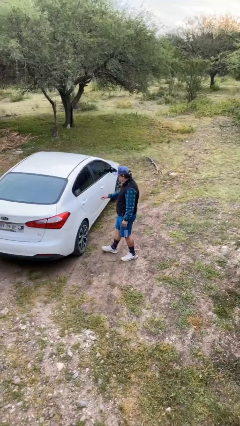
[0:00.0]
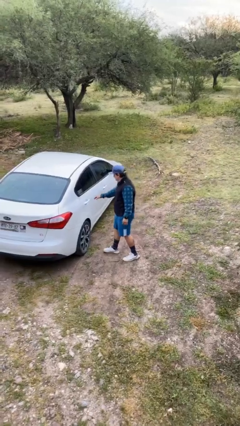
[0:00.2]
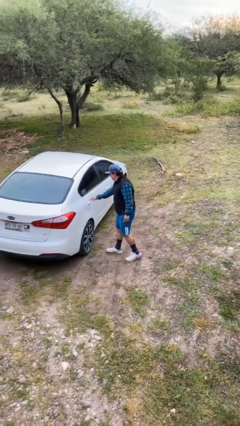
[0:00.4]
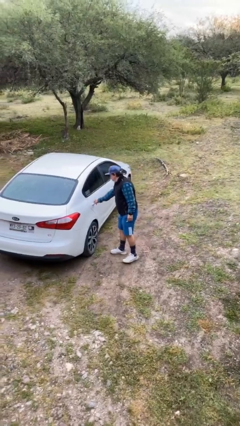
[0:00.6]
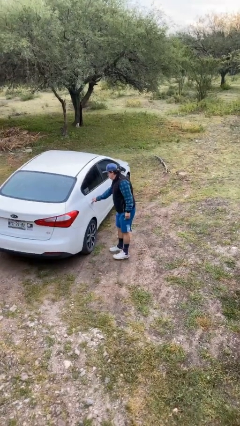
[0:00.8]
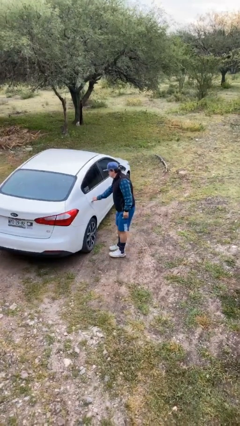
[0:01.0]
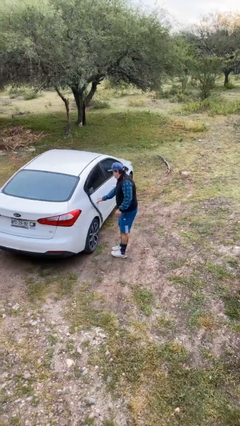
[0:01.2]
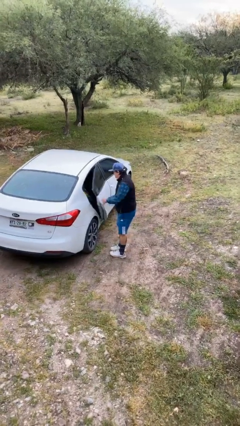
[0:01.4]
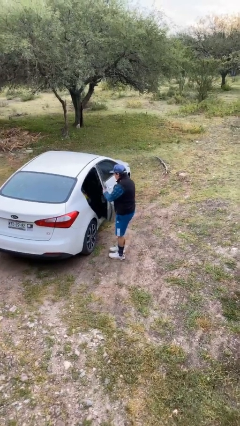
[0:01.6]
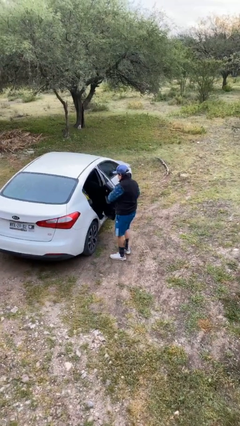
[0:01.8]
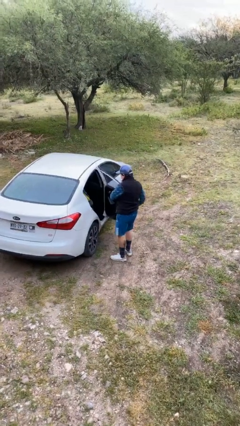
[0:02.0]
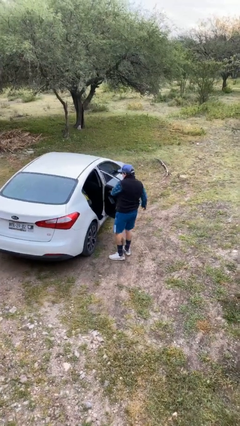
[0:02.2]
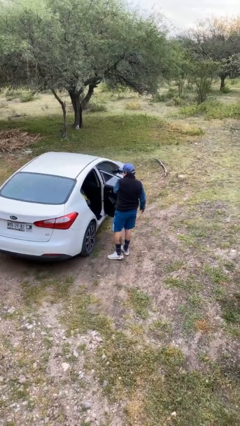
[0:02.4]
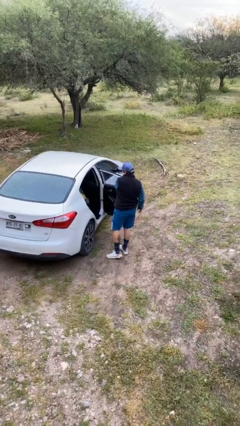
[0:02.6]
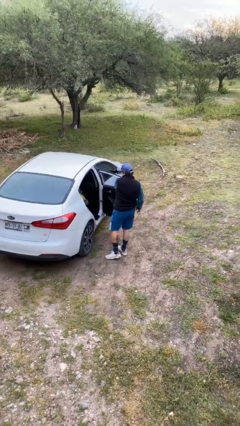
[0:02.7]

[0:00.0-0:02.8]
person opens car door

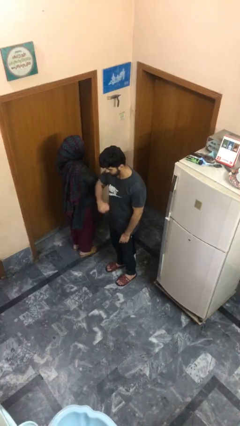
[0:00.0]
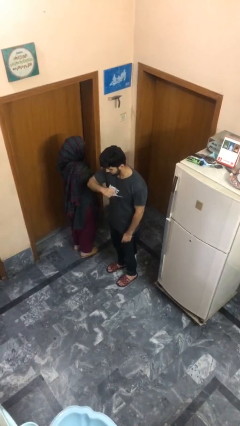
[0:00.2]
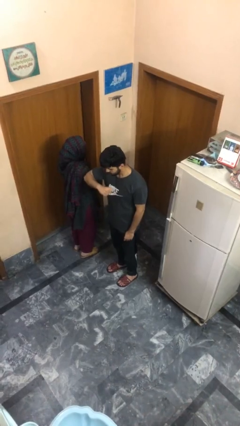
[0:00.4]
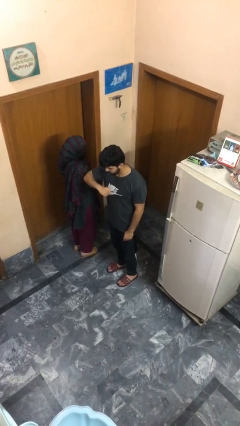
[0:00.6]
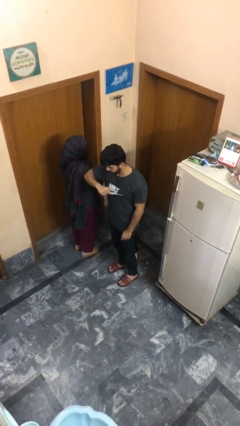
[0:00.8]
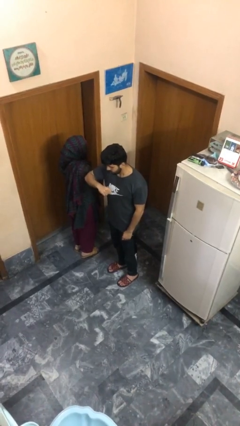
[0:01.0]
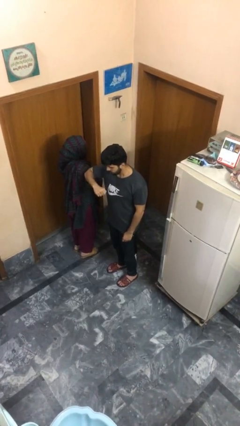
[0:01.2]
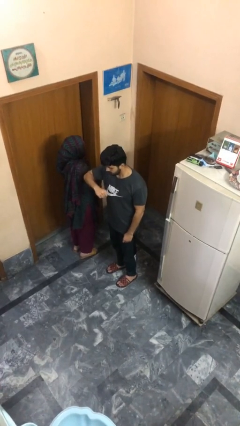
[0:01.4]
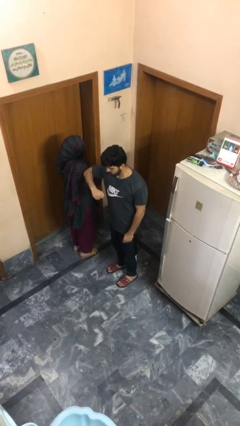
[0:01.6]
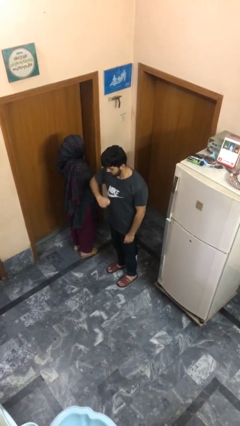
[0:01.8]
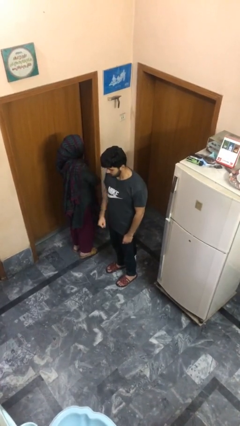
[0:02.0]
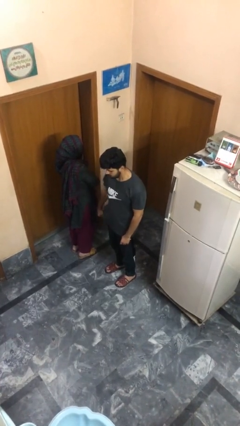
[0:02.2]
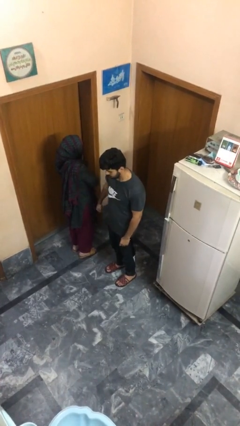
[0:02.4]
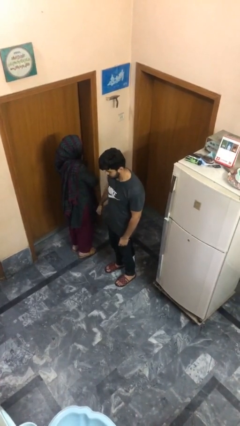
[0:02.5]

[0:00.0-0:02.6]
person nudges person with elbow

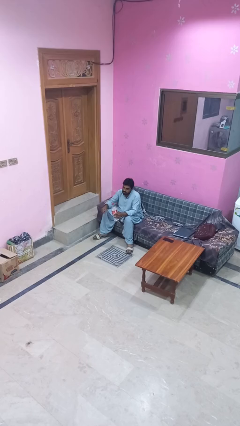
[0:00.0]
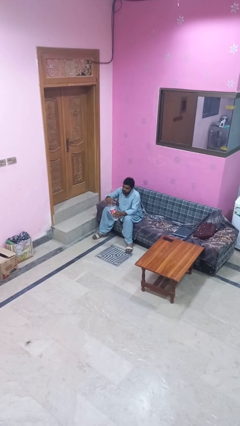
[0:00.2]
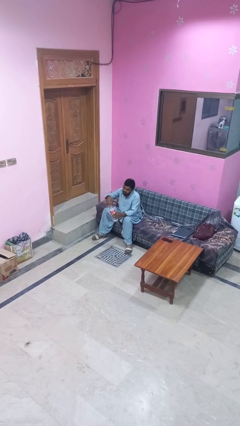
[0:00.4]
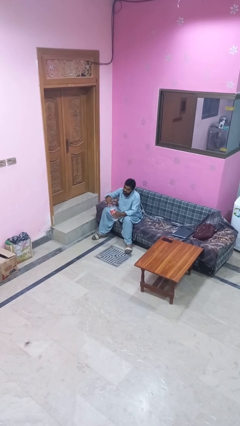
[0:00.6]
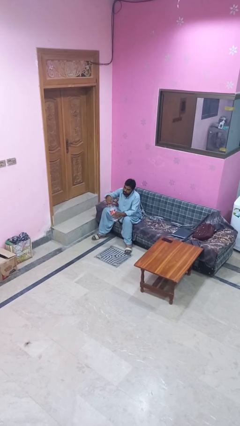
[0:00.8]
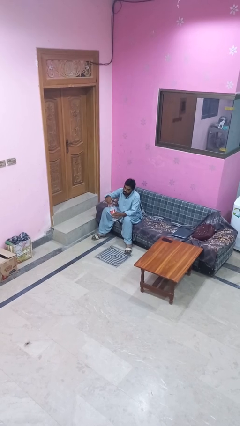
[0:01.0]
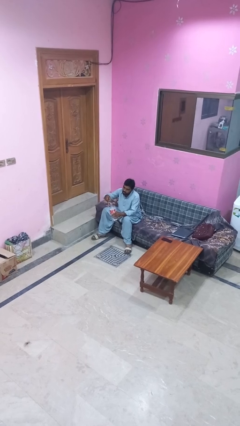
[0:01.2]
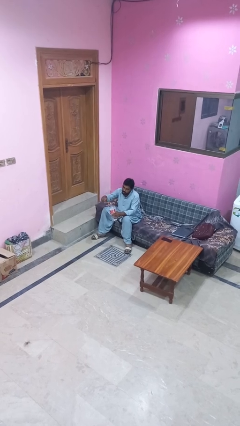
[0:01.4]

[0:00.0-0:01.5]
person unscrews lid from bottle

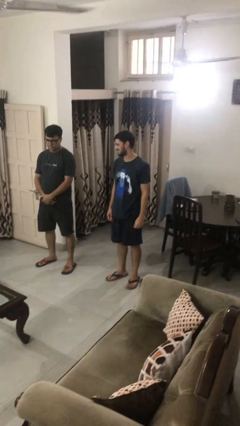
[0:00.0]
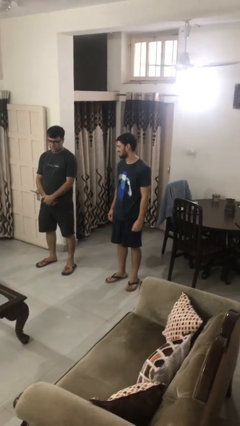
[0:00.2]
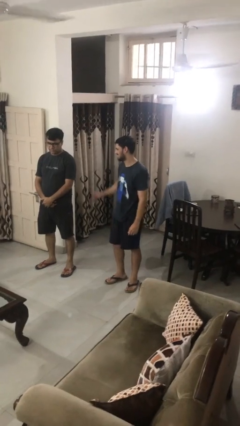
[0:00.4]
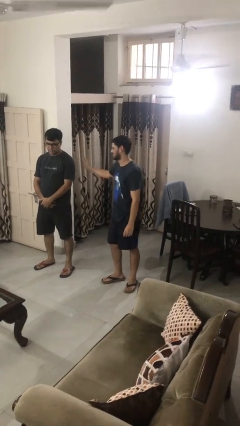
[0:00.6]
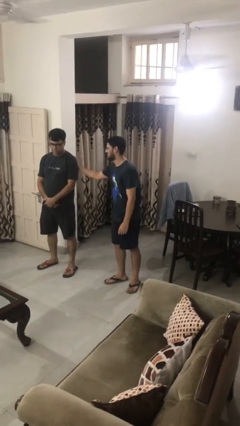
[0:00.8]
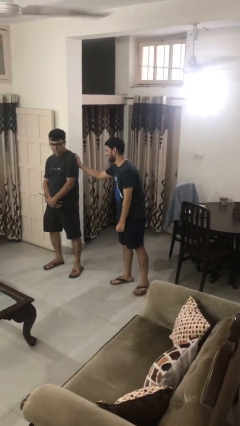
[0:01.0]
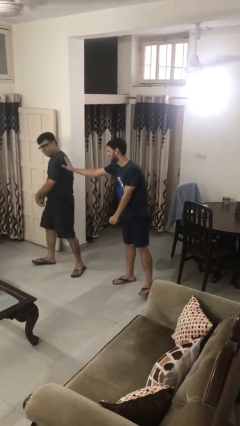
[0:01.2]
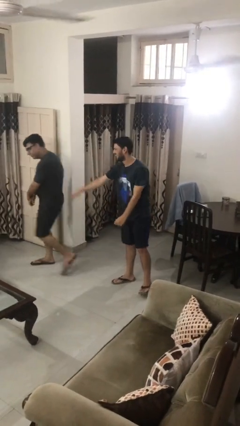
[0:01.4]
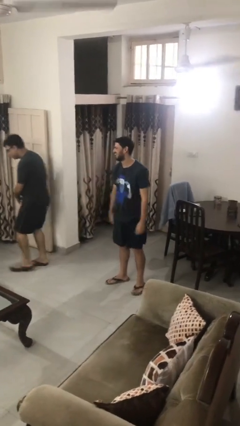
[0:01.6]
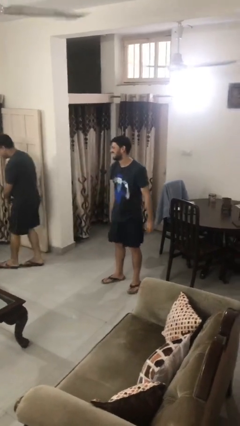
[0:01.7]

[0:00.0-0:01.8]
person shoves person

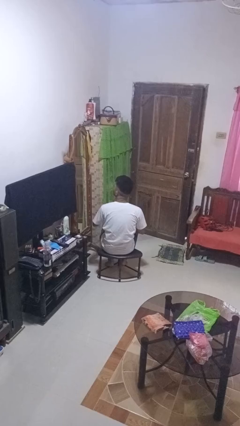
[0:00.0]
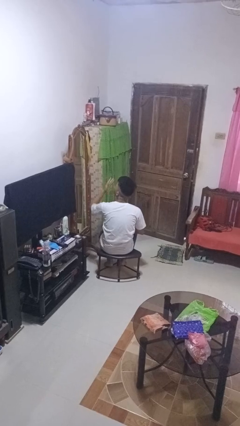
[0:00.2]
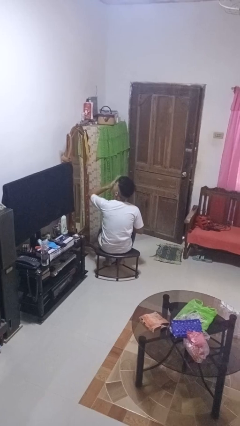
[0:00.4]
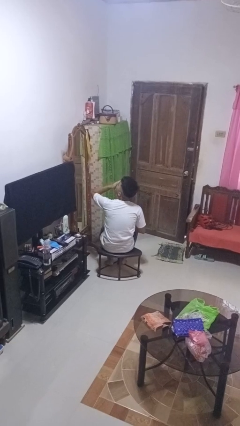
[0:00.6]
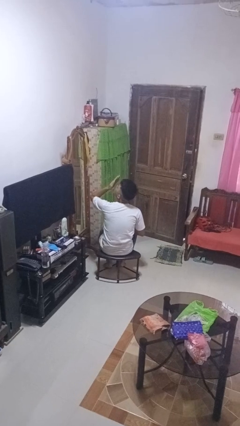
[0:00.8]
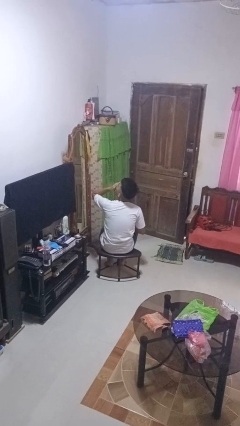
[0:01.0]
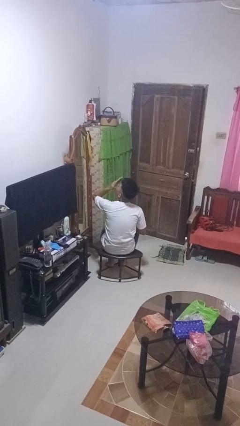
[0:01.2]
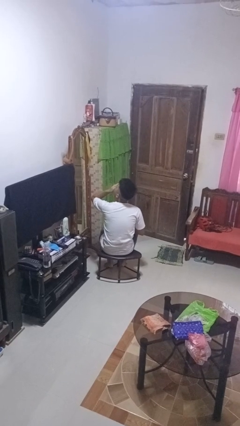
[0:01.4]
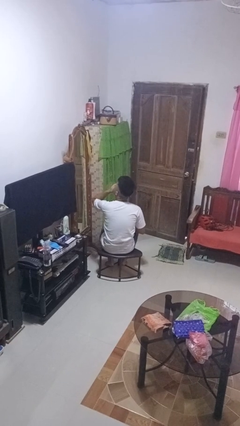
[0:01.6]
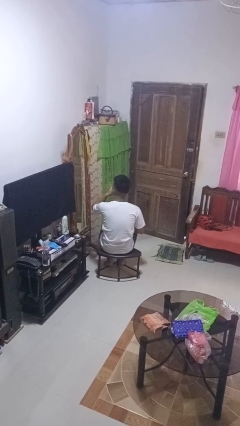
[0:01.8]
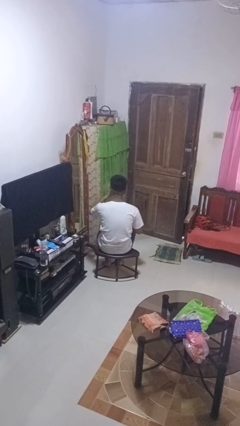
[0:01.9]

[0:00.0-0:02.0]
person yawns

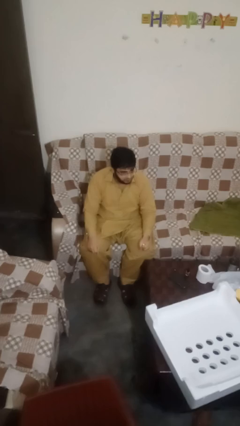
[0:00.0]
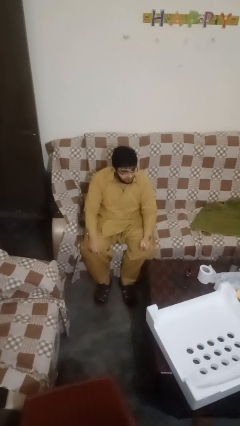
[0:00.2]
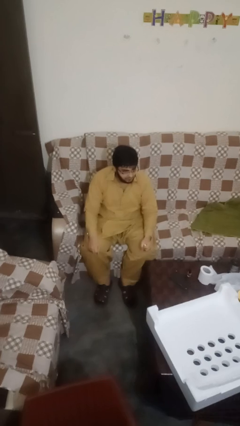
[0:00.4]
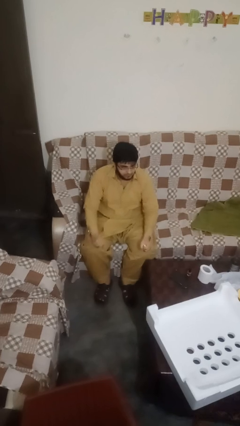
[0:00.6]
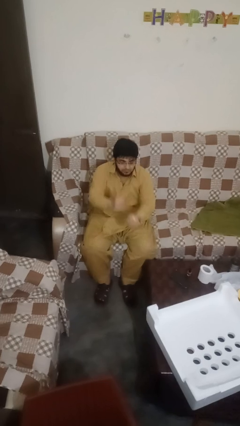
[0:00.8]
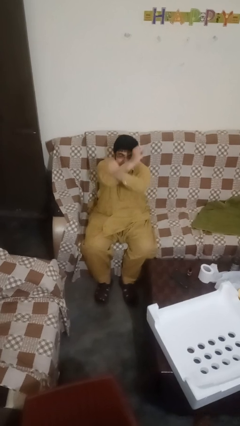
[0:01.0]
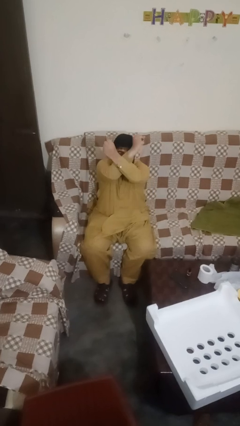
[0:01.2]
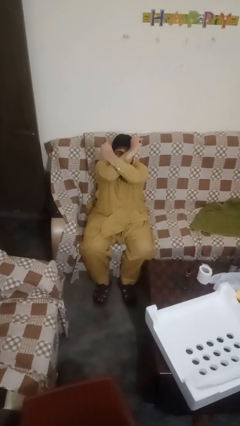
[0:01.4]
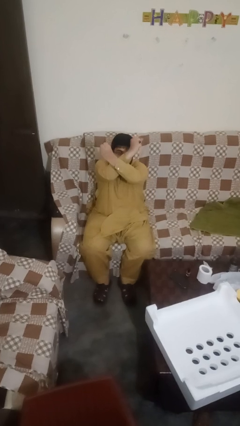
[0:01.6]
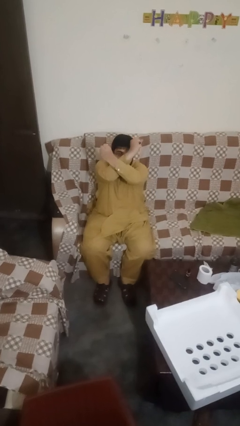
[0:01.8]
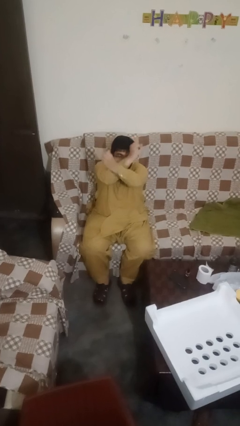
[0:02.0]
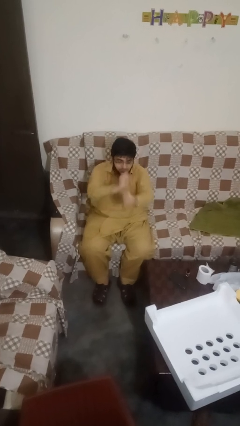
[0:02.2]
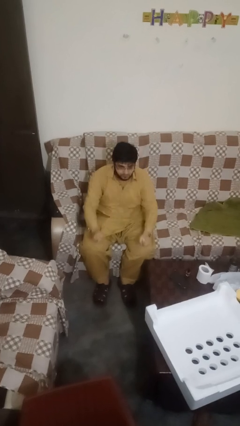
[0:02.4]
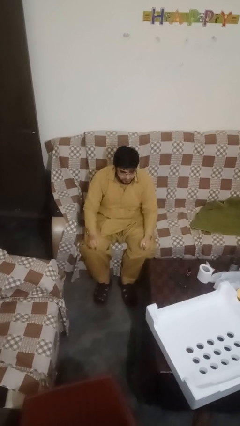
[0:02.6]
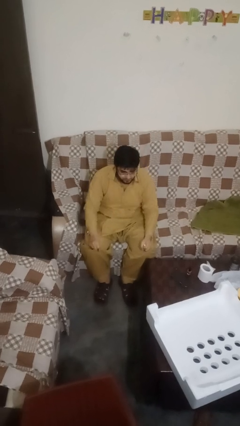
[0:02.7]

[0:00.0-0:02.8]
person gestures arms x

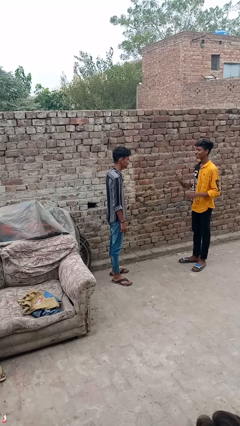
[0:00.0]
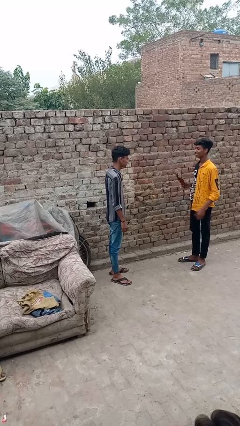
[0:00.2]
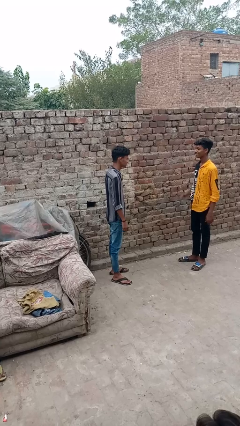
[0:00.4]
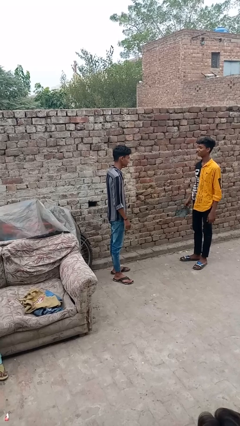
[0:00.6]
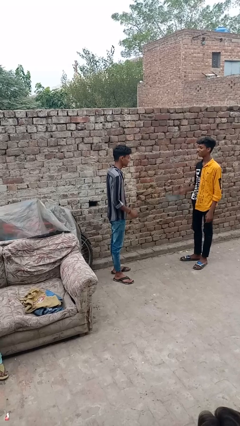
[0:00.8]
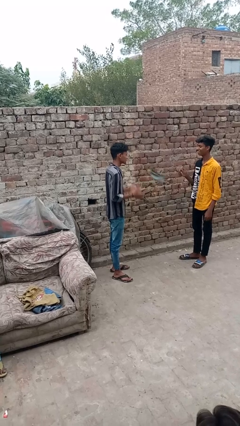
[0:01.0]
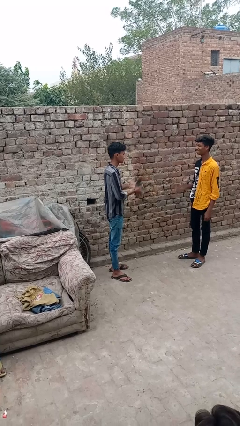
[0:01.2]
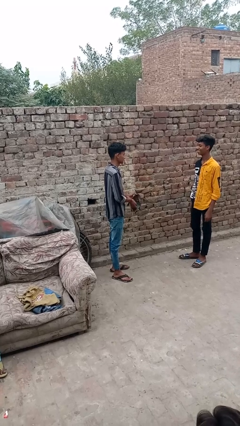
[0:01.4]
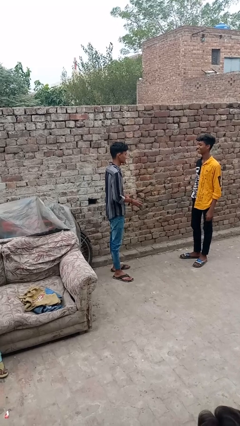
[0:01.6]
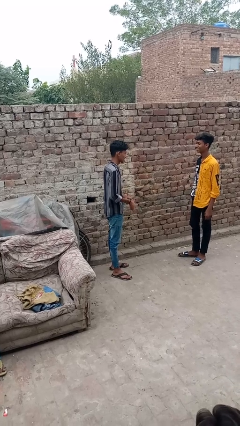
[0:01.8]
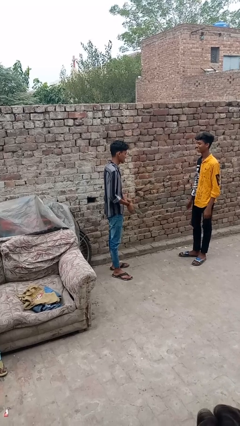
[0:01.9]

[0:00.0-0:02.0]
person catches object from person

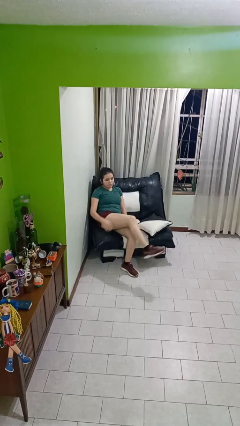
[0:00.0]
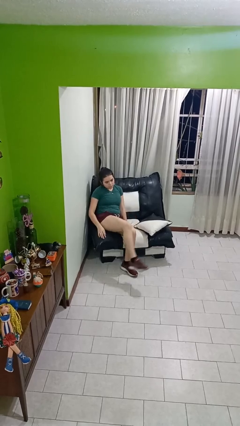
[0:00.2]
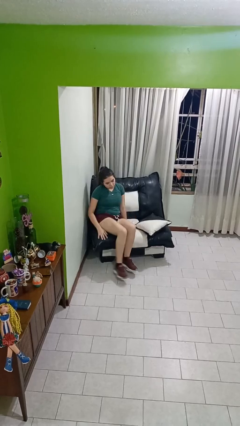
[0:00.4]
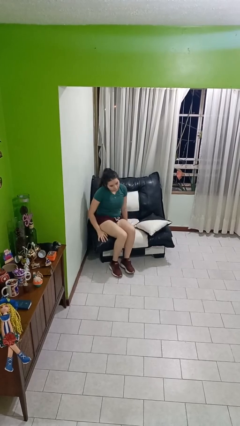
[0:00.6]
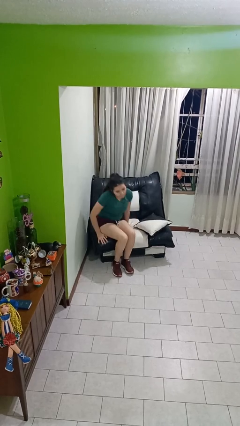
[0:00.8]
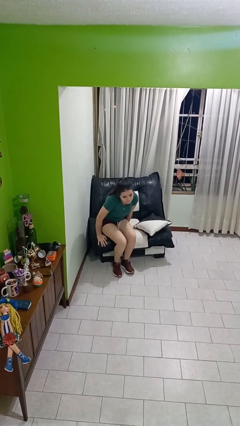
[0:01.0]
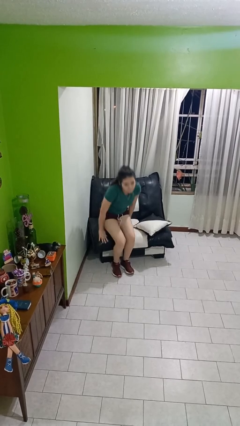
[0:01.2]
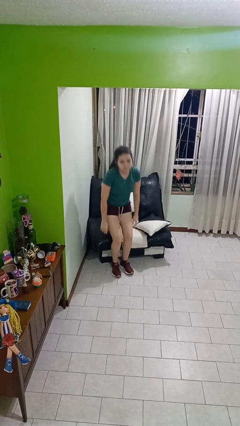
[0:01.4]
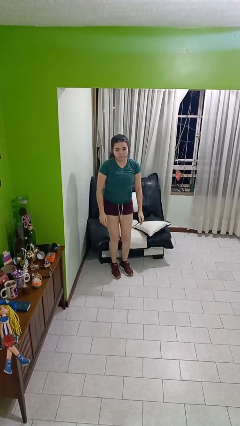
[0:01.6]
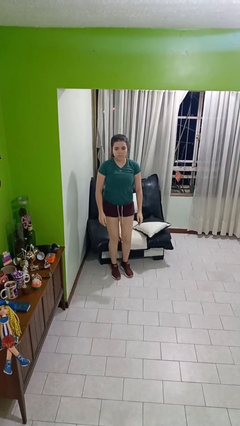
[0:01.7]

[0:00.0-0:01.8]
person stands up
